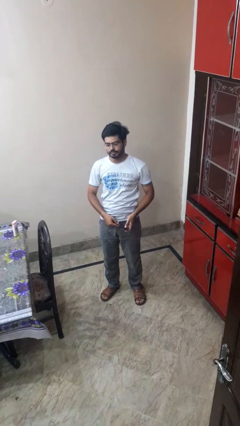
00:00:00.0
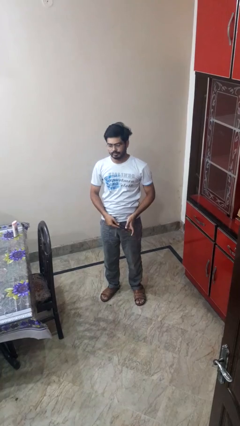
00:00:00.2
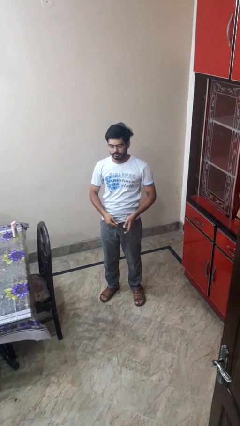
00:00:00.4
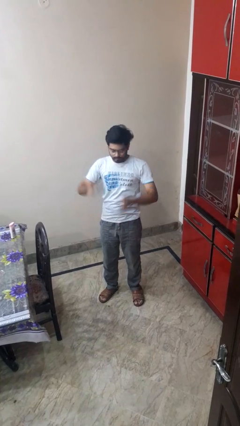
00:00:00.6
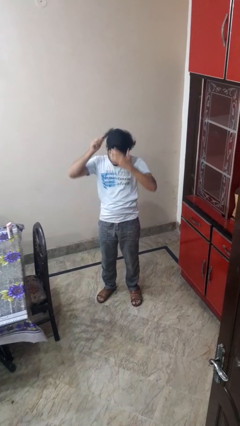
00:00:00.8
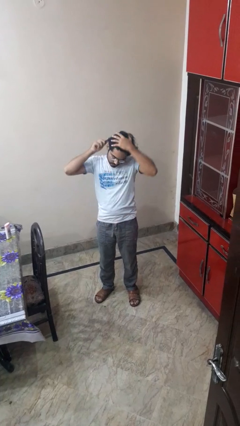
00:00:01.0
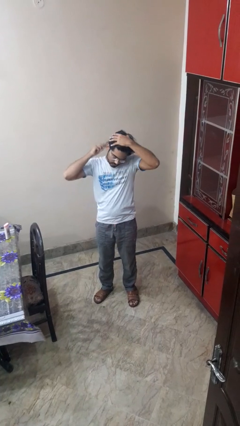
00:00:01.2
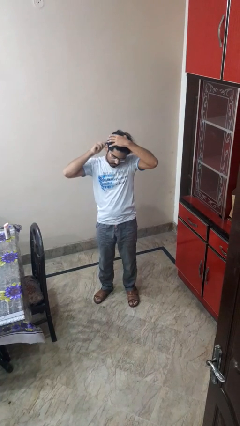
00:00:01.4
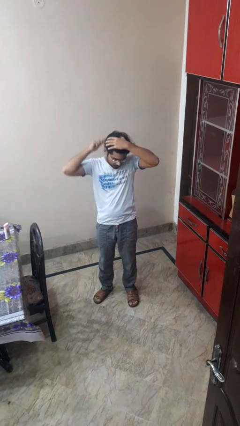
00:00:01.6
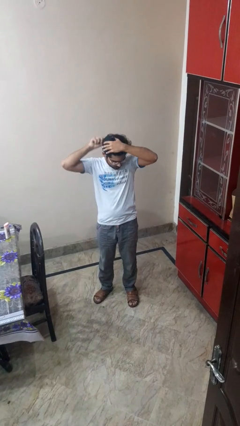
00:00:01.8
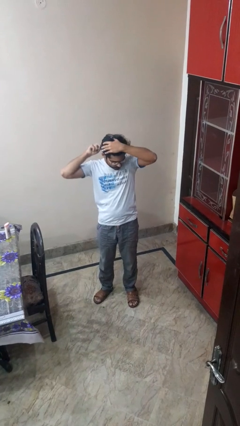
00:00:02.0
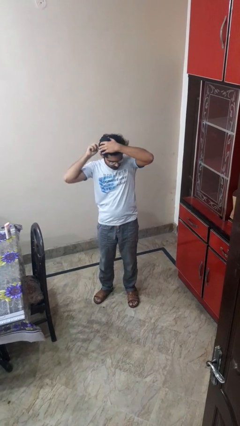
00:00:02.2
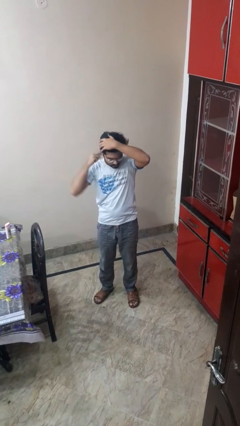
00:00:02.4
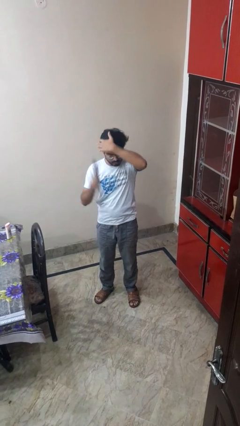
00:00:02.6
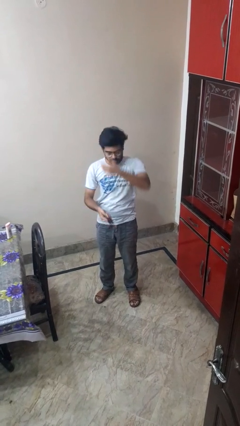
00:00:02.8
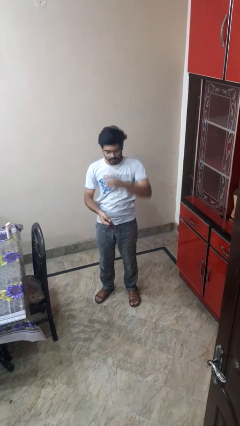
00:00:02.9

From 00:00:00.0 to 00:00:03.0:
person brushes hair

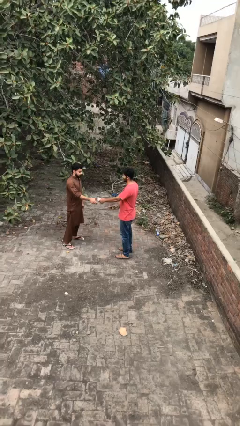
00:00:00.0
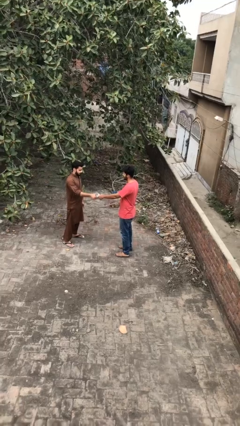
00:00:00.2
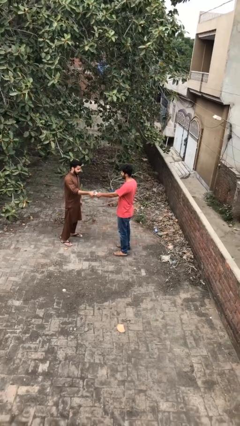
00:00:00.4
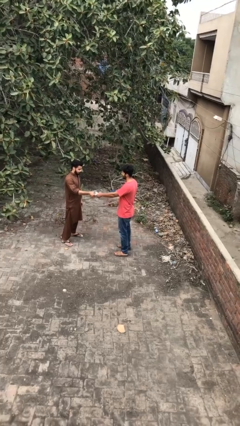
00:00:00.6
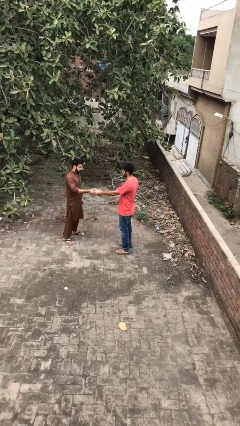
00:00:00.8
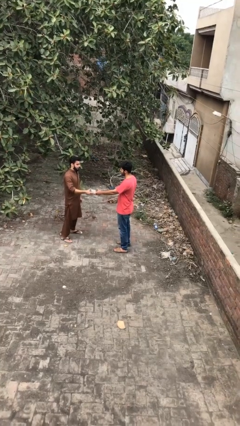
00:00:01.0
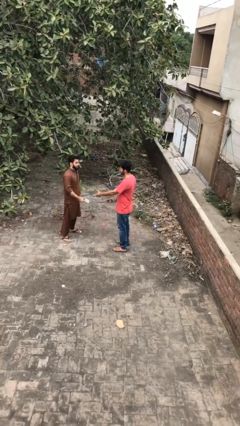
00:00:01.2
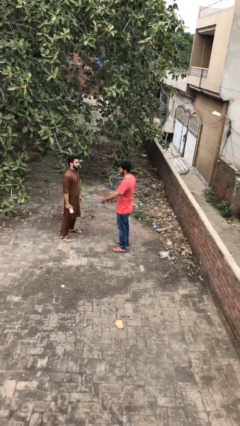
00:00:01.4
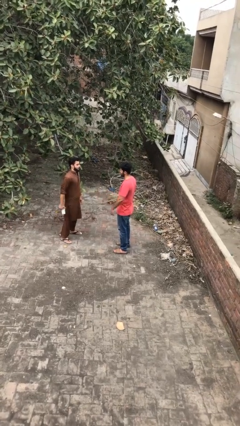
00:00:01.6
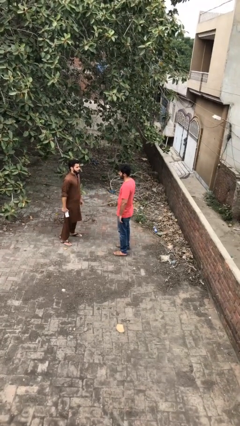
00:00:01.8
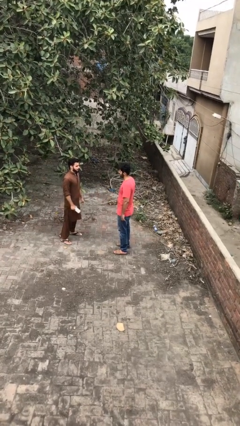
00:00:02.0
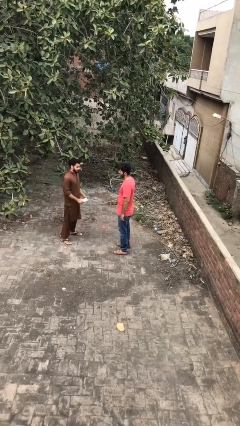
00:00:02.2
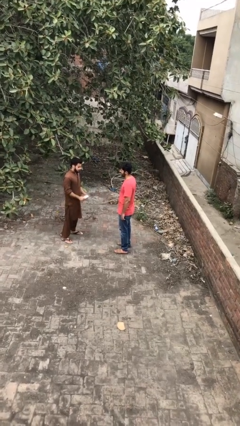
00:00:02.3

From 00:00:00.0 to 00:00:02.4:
person transfers object to person

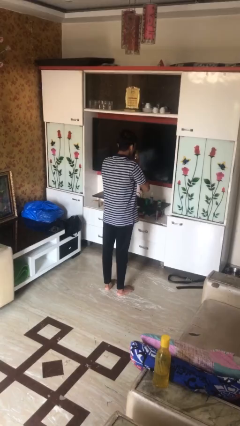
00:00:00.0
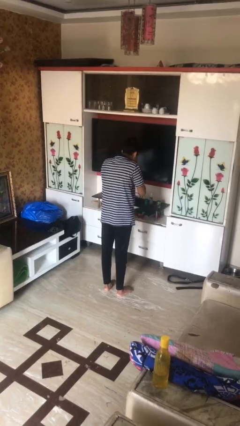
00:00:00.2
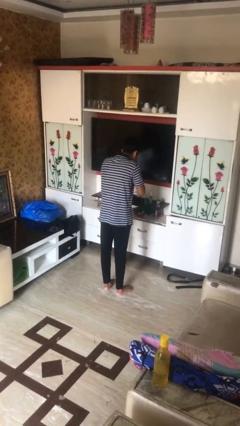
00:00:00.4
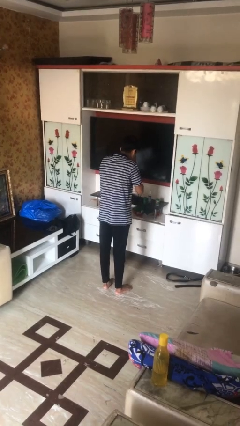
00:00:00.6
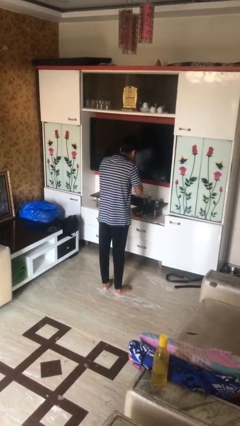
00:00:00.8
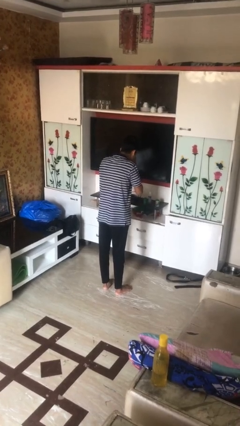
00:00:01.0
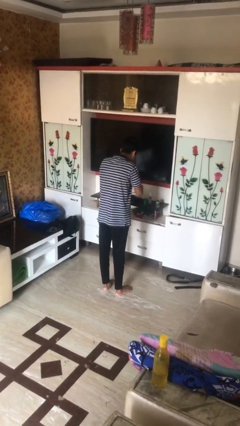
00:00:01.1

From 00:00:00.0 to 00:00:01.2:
person sneezes into hand

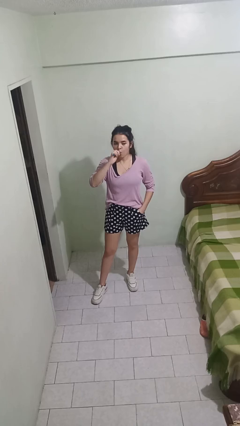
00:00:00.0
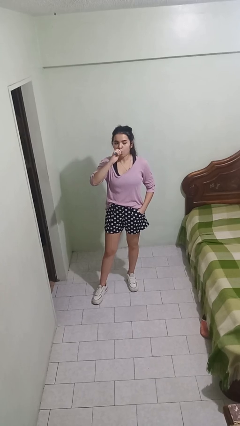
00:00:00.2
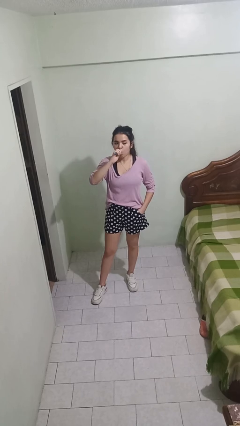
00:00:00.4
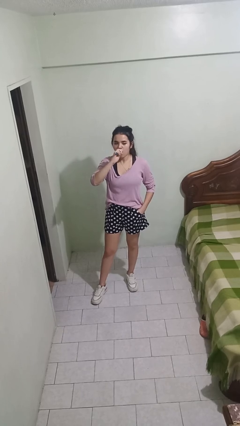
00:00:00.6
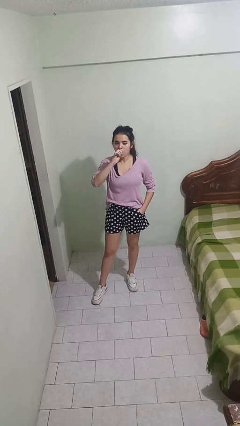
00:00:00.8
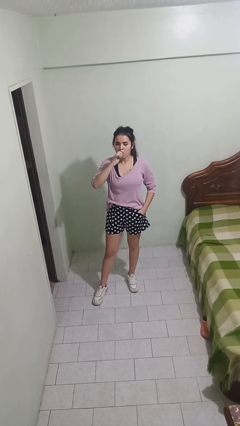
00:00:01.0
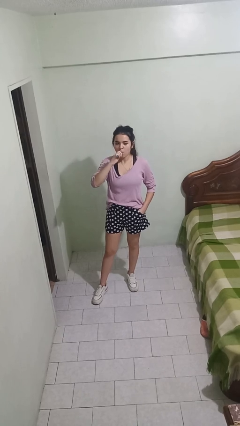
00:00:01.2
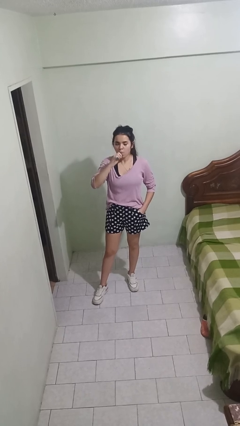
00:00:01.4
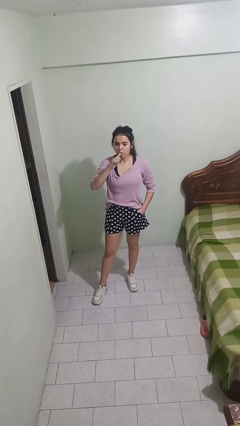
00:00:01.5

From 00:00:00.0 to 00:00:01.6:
person brushes teeth

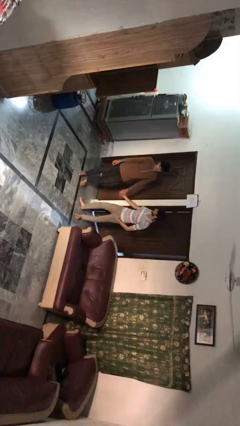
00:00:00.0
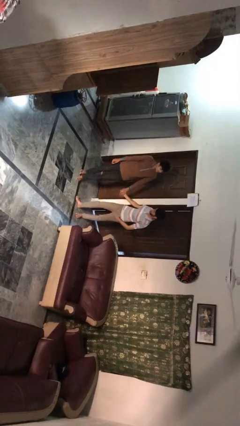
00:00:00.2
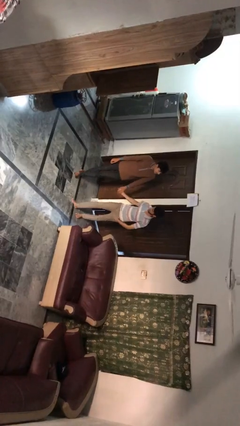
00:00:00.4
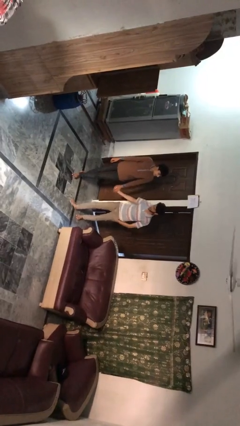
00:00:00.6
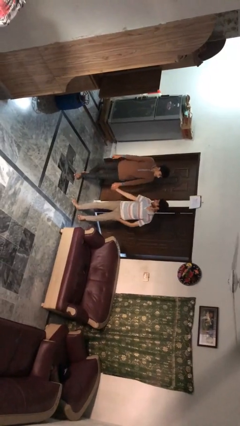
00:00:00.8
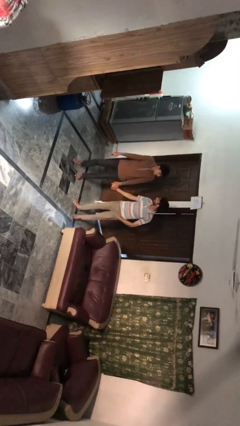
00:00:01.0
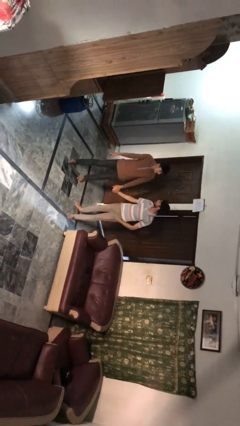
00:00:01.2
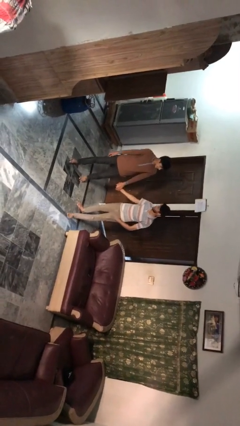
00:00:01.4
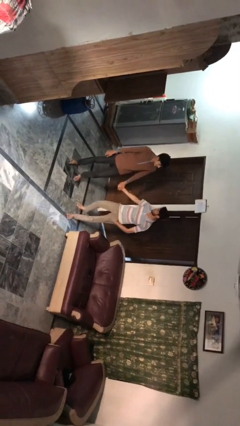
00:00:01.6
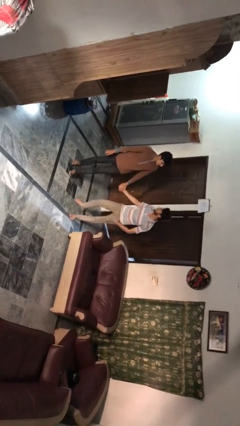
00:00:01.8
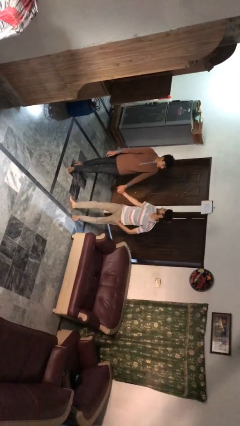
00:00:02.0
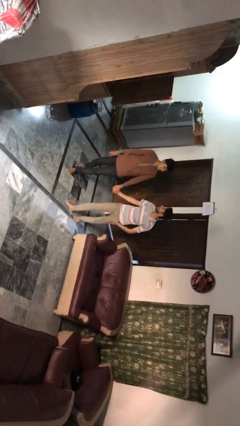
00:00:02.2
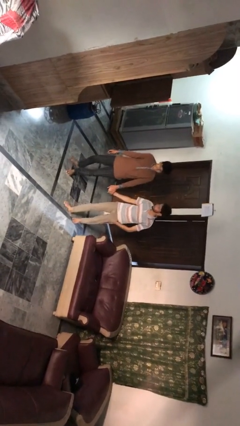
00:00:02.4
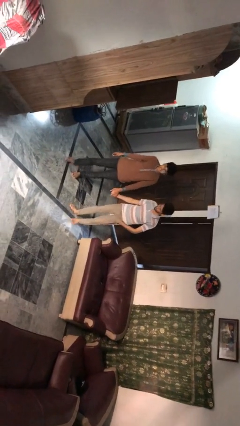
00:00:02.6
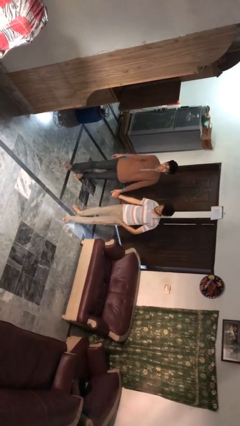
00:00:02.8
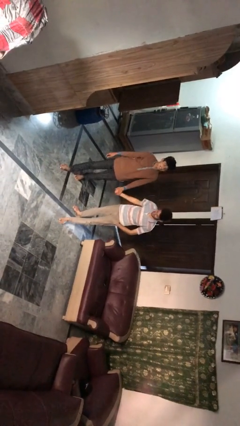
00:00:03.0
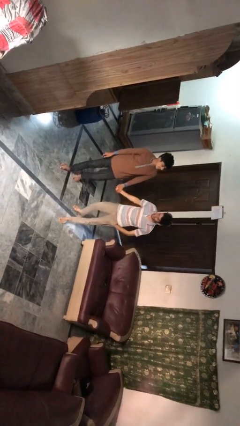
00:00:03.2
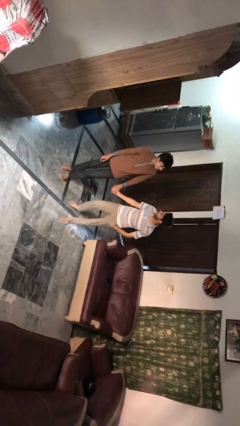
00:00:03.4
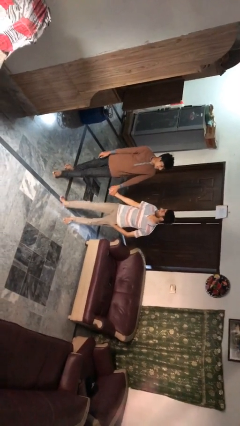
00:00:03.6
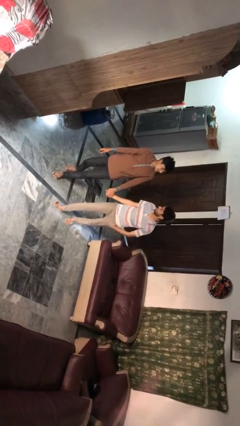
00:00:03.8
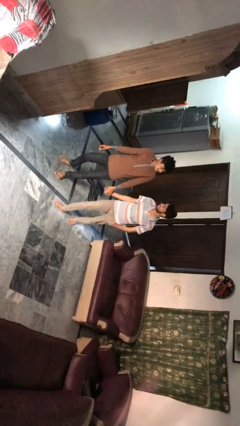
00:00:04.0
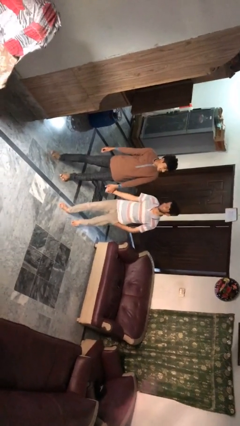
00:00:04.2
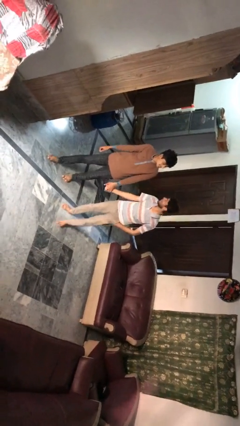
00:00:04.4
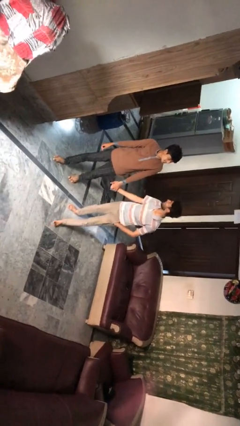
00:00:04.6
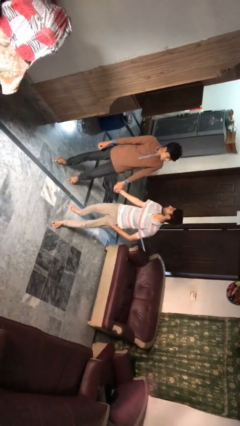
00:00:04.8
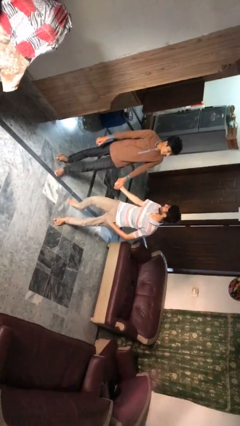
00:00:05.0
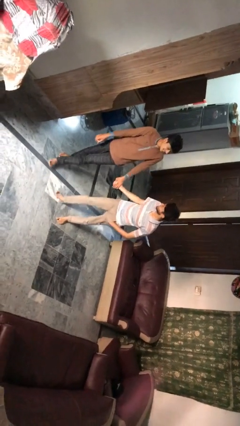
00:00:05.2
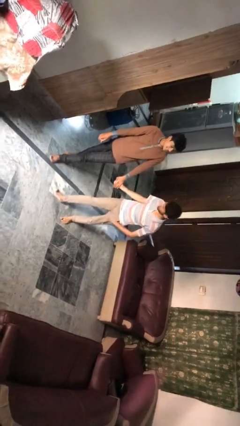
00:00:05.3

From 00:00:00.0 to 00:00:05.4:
person holds hand

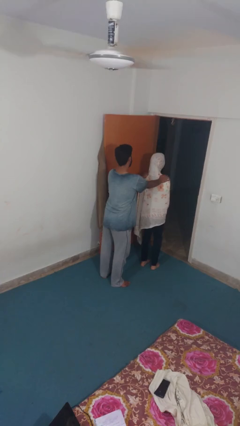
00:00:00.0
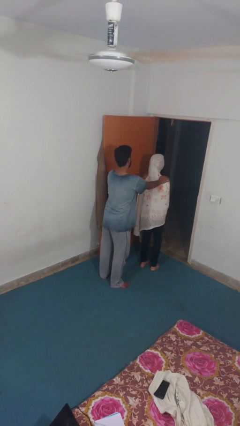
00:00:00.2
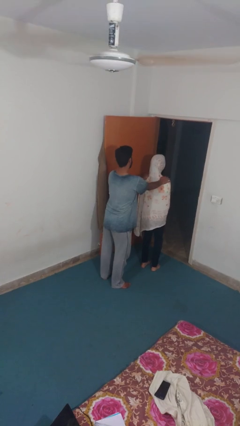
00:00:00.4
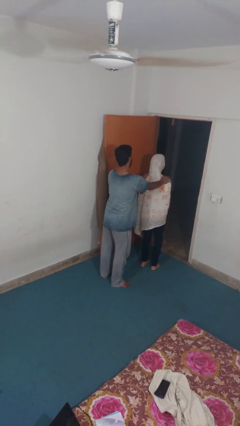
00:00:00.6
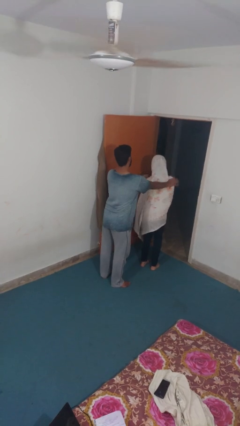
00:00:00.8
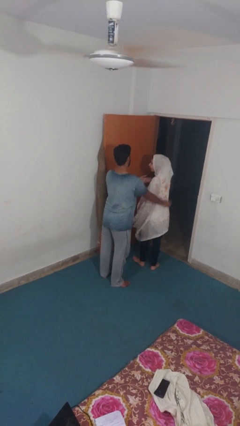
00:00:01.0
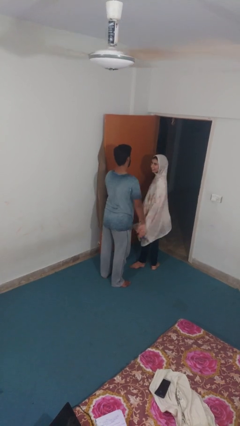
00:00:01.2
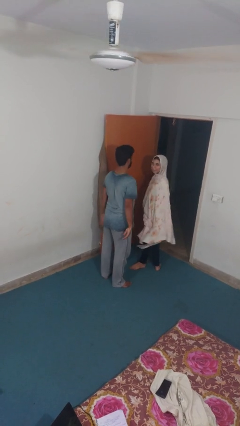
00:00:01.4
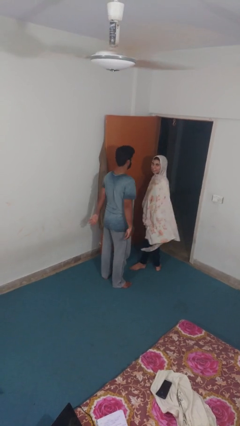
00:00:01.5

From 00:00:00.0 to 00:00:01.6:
person spins person around

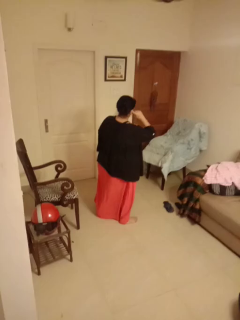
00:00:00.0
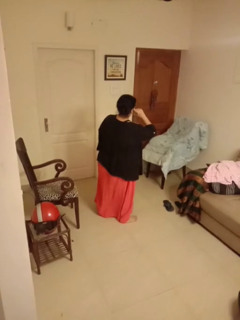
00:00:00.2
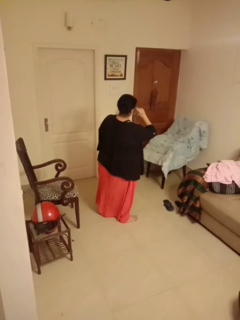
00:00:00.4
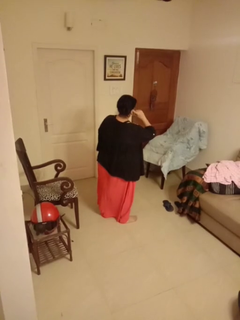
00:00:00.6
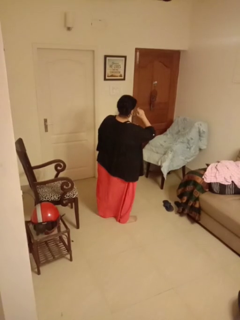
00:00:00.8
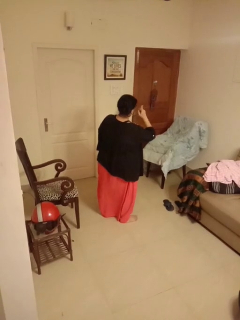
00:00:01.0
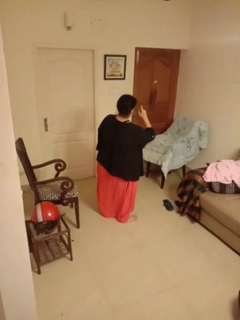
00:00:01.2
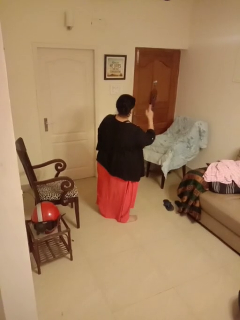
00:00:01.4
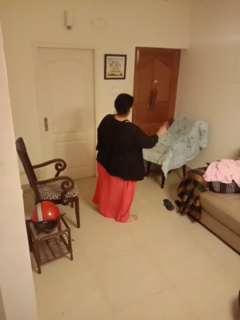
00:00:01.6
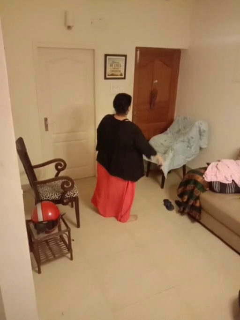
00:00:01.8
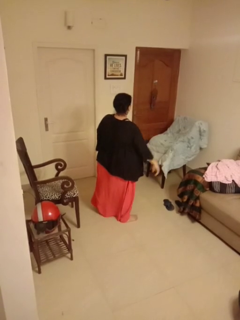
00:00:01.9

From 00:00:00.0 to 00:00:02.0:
person gestures listen closely

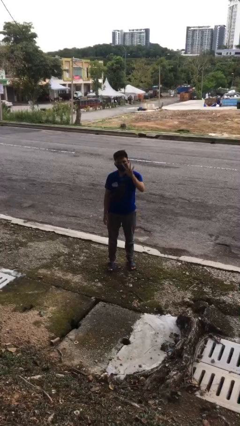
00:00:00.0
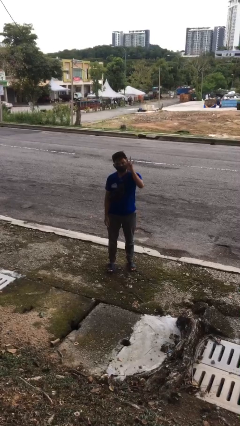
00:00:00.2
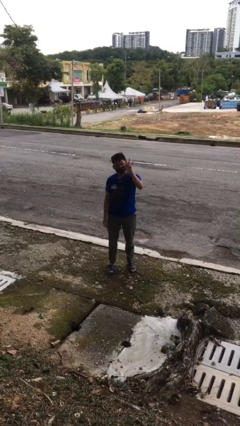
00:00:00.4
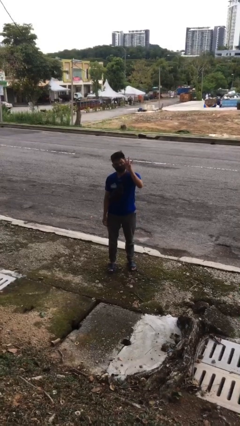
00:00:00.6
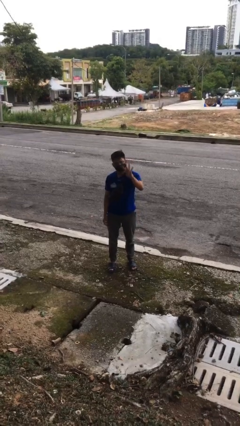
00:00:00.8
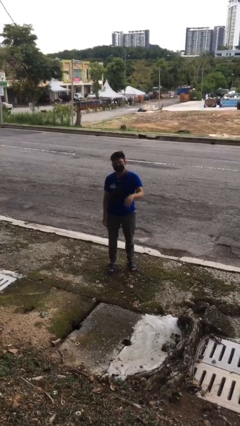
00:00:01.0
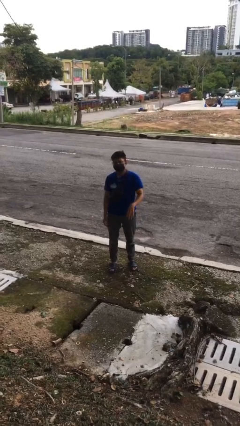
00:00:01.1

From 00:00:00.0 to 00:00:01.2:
person gestures number four
